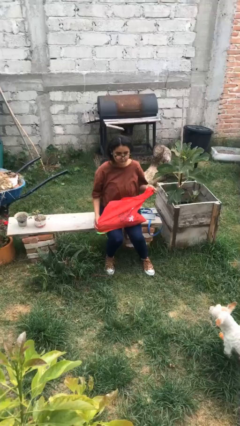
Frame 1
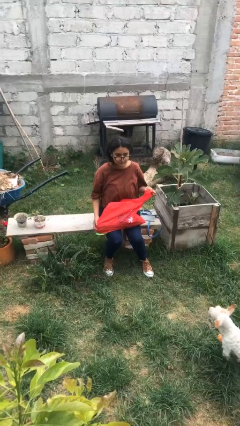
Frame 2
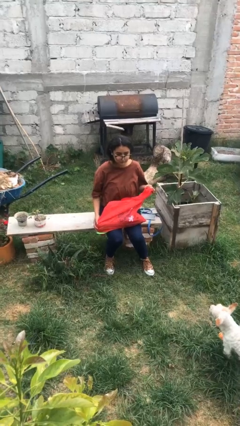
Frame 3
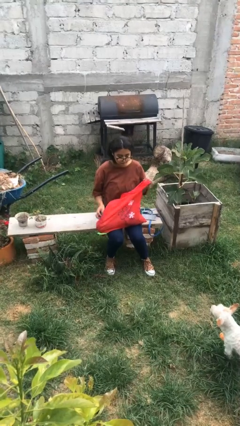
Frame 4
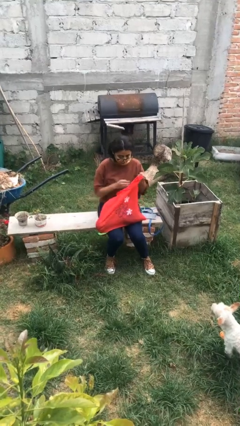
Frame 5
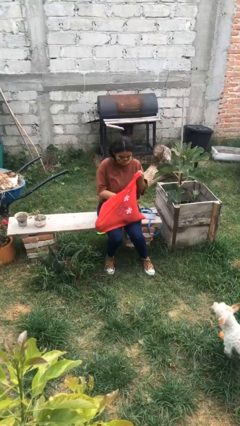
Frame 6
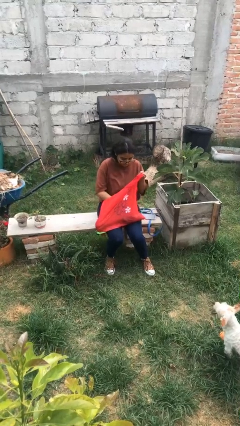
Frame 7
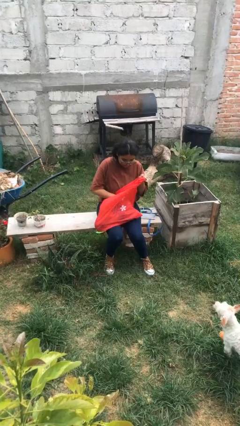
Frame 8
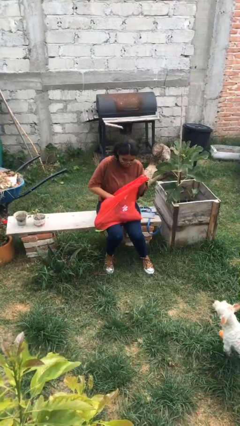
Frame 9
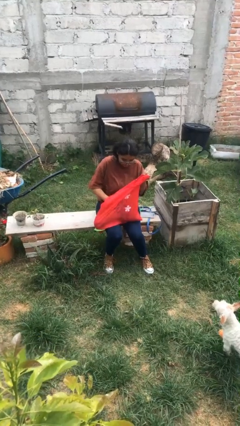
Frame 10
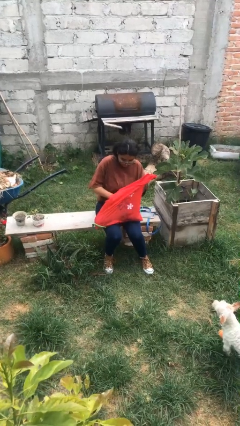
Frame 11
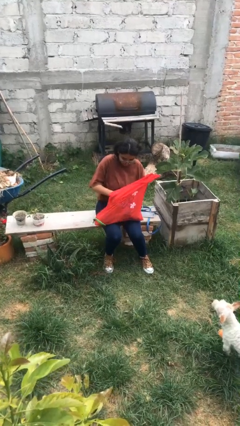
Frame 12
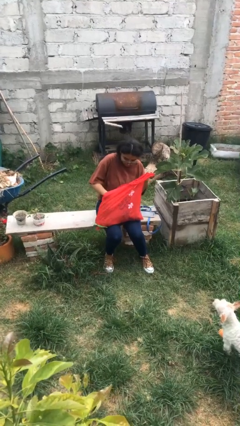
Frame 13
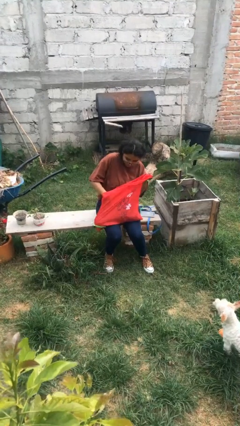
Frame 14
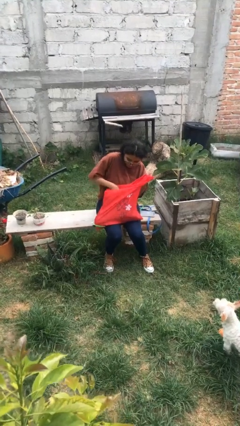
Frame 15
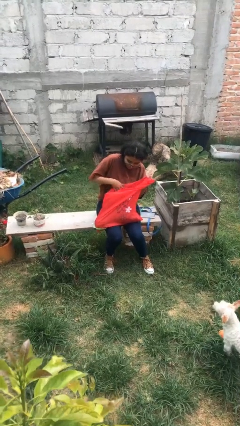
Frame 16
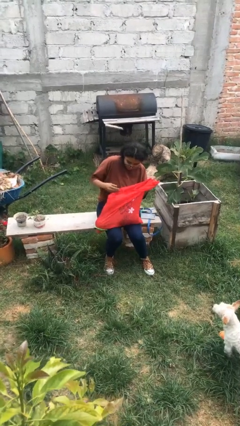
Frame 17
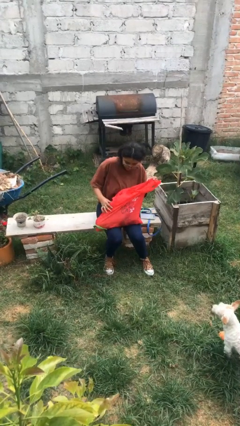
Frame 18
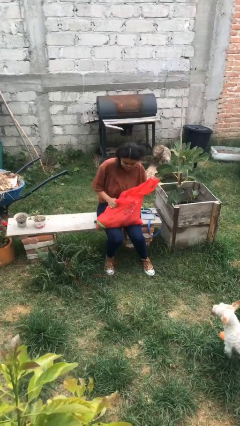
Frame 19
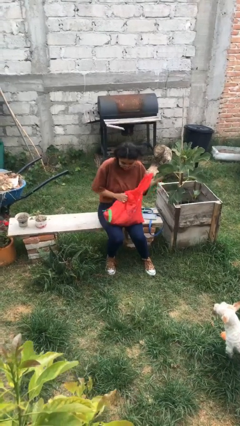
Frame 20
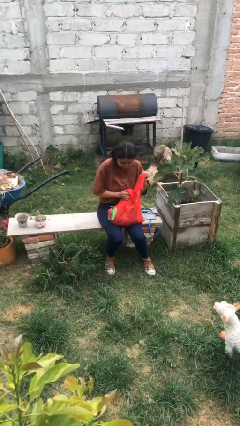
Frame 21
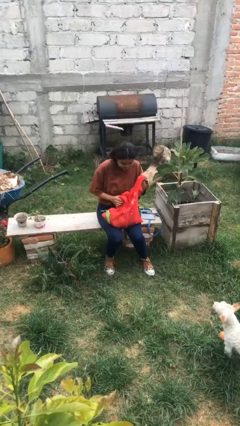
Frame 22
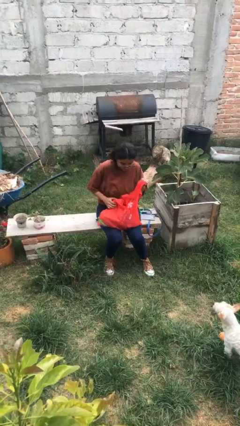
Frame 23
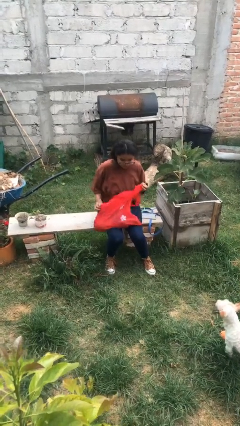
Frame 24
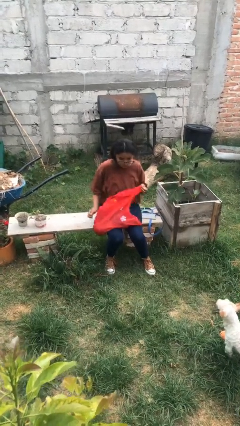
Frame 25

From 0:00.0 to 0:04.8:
person searches in bag

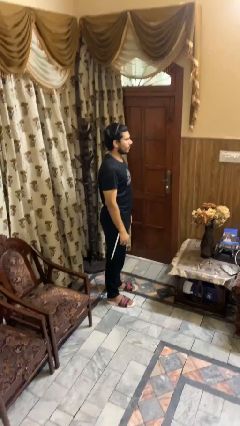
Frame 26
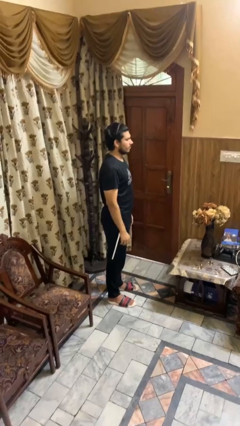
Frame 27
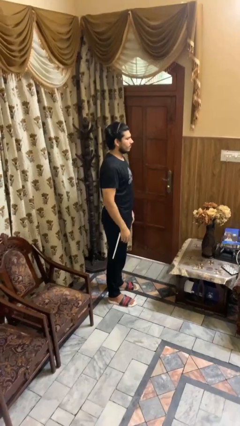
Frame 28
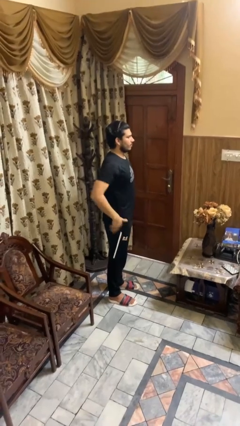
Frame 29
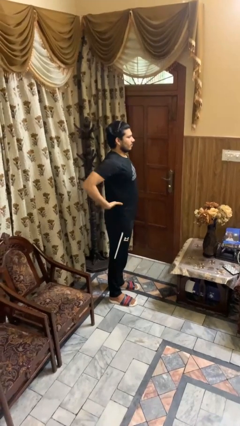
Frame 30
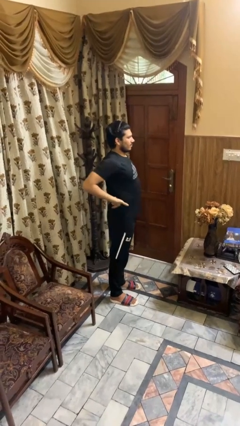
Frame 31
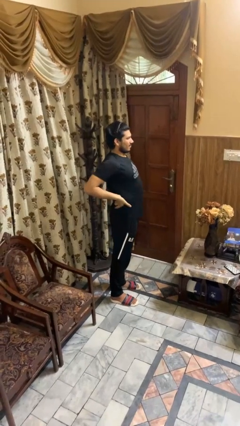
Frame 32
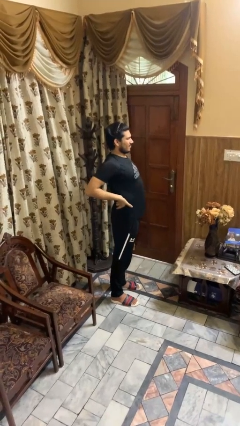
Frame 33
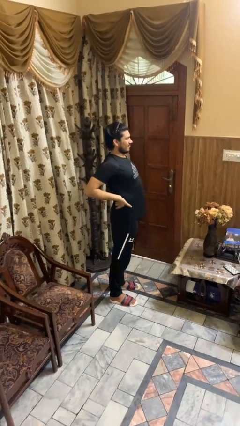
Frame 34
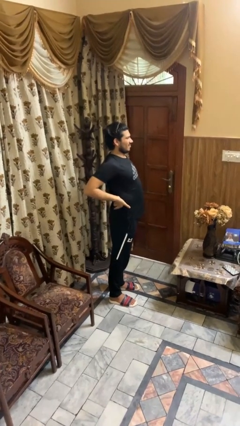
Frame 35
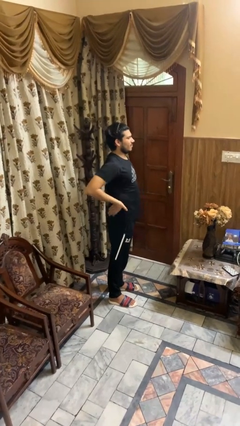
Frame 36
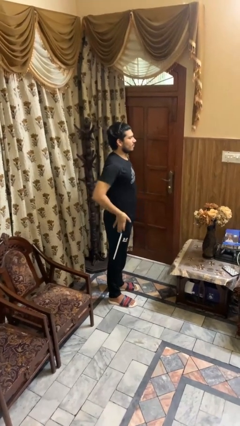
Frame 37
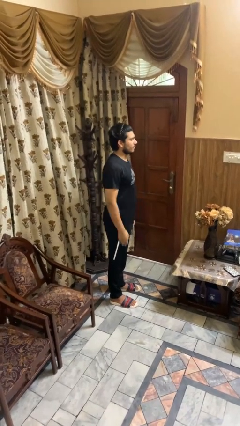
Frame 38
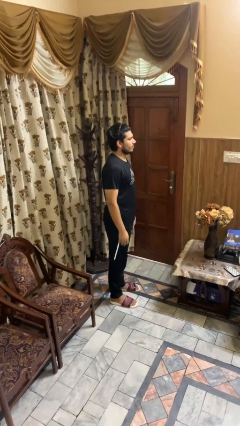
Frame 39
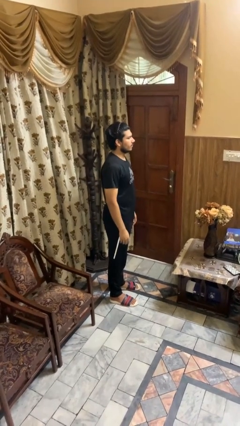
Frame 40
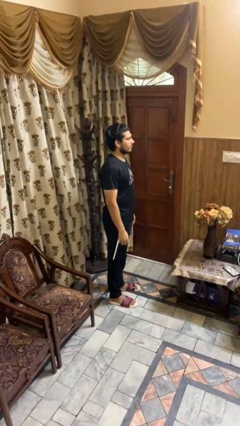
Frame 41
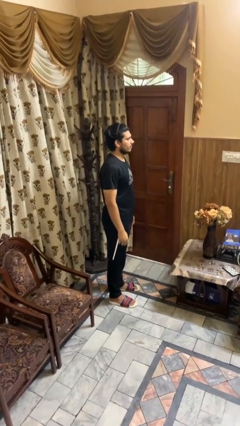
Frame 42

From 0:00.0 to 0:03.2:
person stretches back

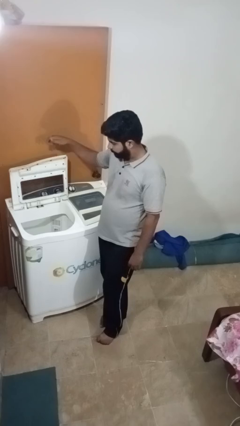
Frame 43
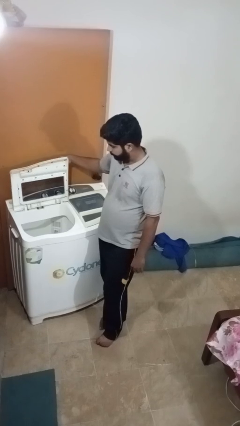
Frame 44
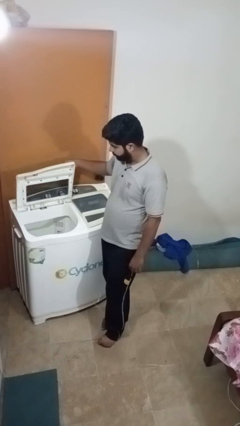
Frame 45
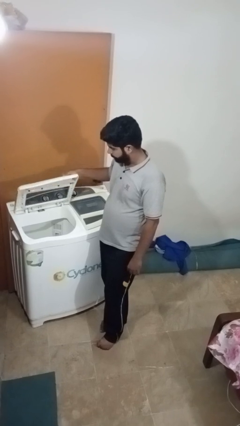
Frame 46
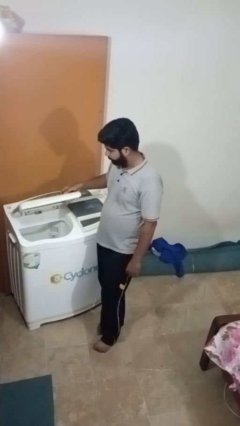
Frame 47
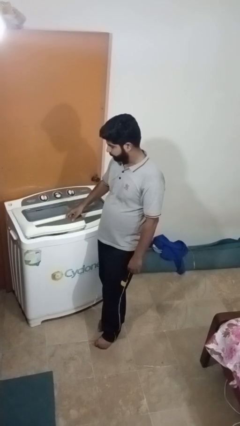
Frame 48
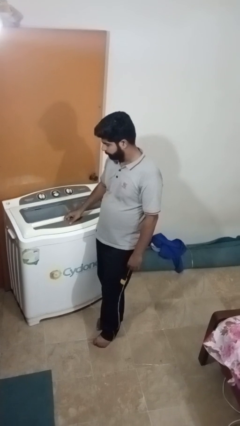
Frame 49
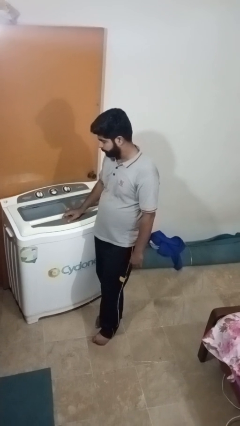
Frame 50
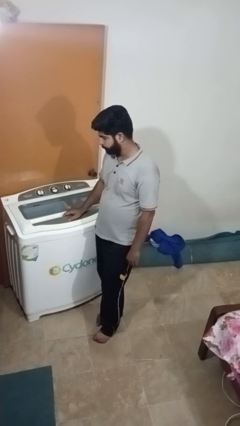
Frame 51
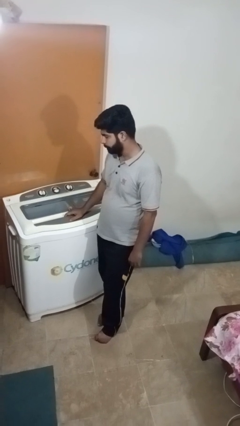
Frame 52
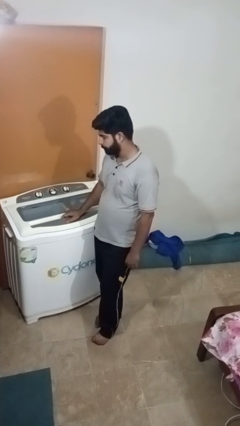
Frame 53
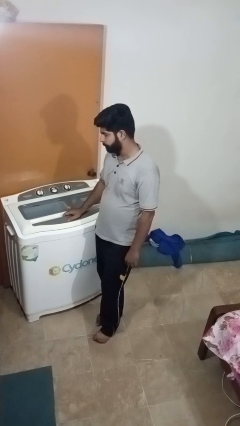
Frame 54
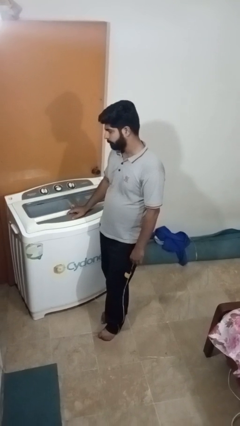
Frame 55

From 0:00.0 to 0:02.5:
person closes clothes washer

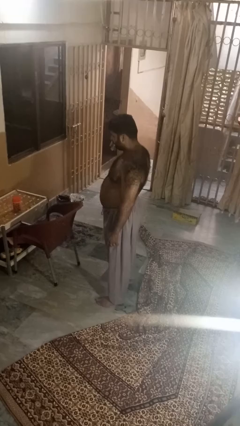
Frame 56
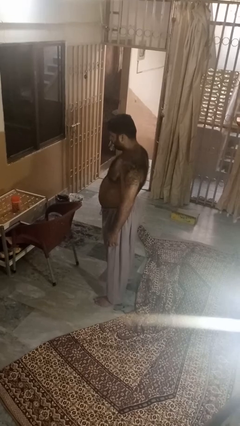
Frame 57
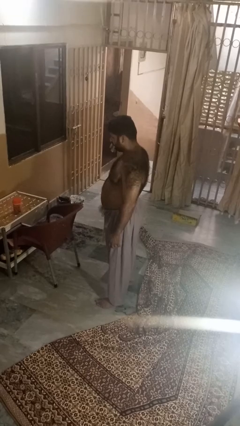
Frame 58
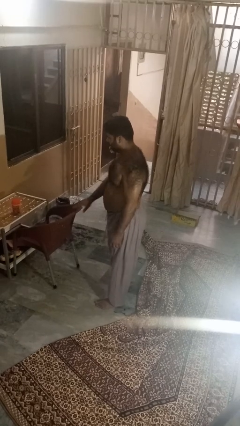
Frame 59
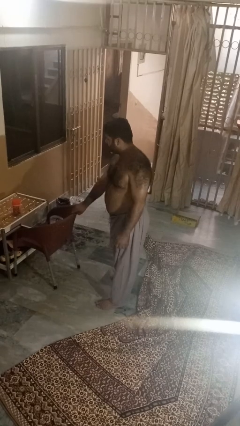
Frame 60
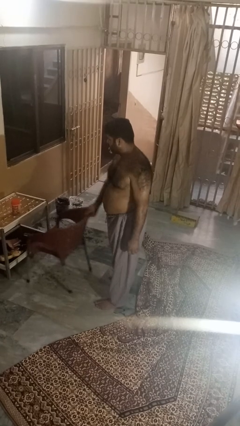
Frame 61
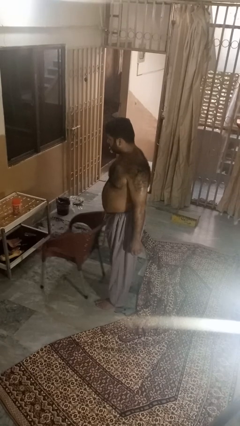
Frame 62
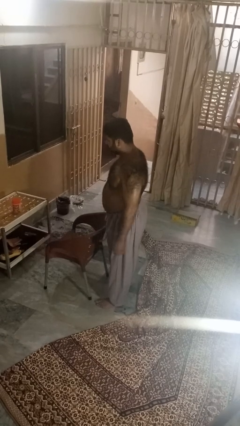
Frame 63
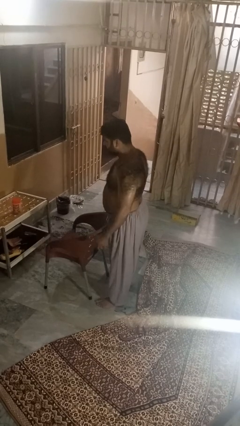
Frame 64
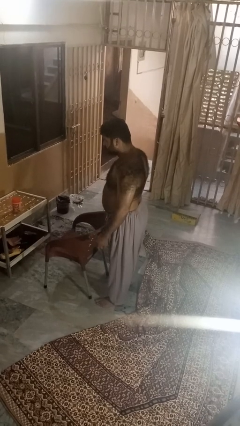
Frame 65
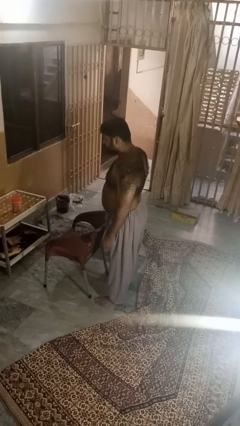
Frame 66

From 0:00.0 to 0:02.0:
person pulls out chair

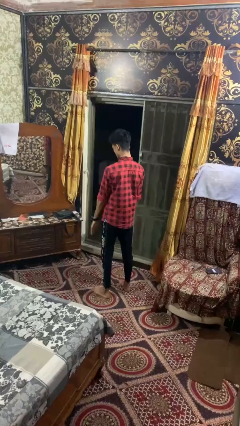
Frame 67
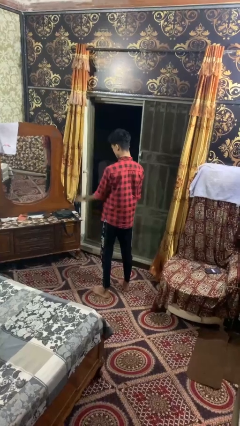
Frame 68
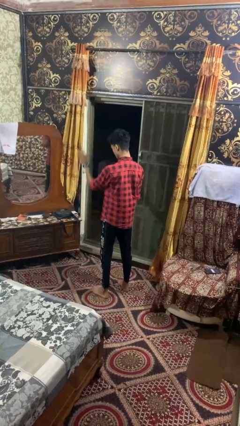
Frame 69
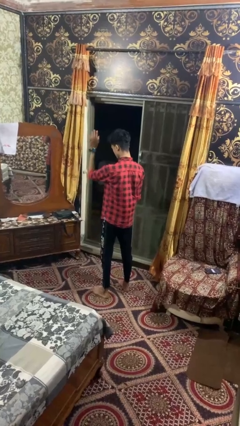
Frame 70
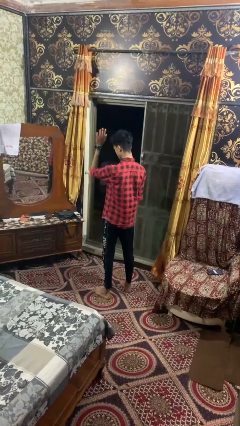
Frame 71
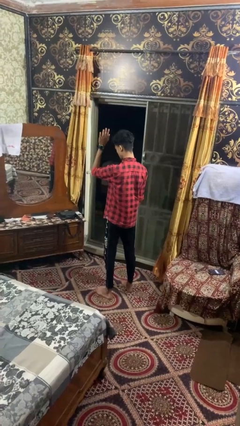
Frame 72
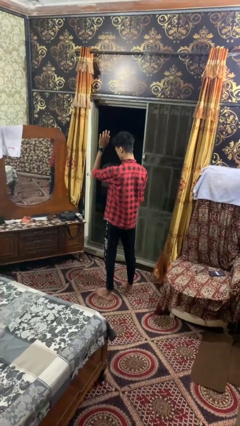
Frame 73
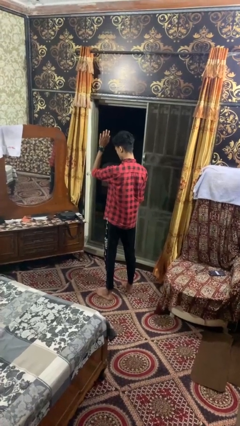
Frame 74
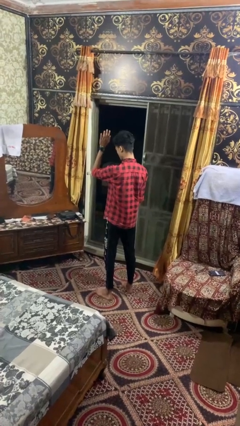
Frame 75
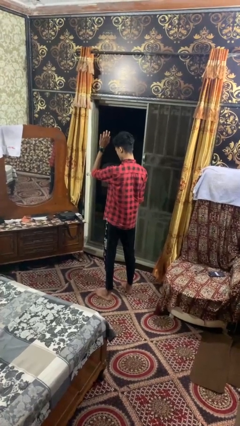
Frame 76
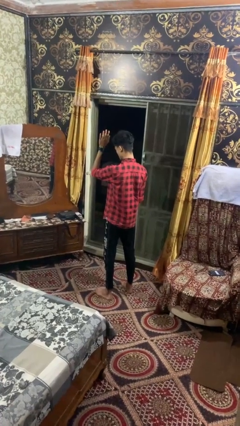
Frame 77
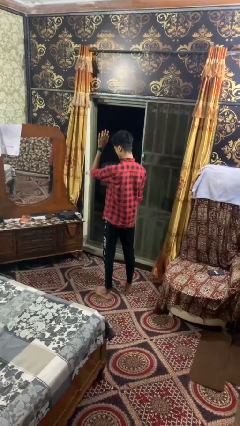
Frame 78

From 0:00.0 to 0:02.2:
person gestures raise hand

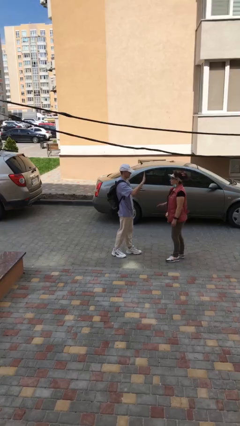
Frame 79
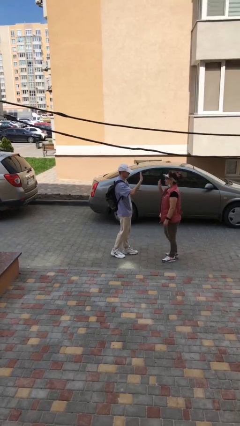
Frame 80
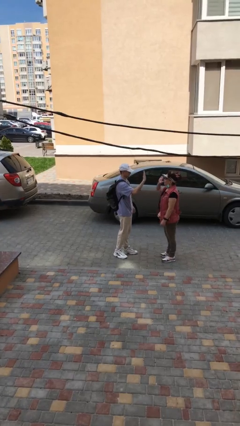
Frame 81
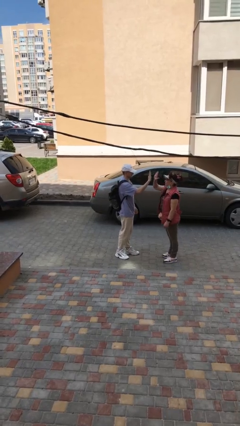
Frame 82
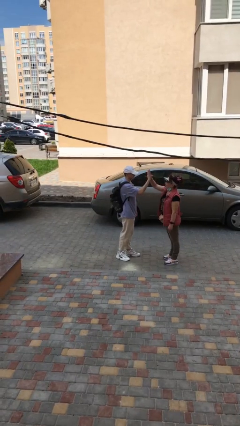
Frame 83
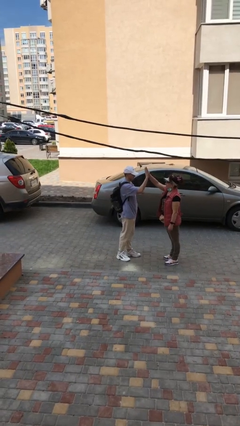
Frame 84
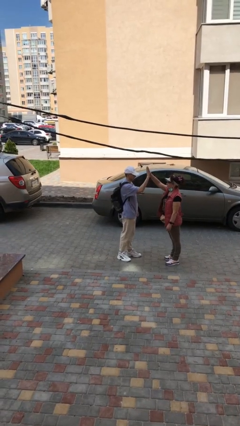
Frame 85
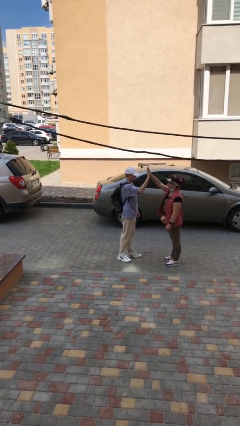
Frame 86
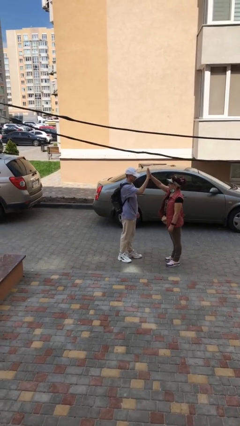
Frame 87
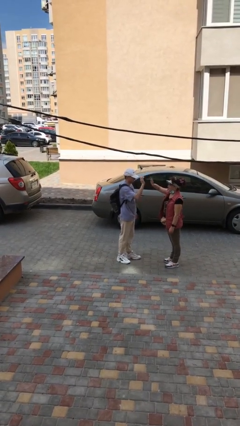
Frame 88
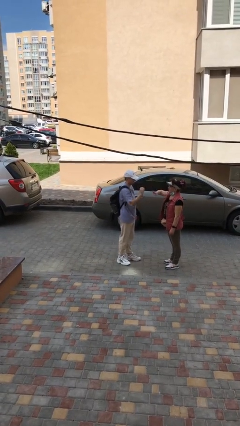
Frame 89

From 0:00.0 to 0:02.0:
person highfives hand

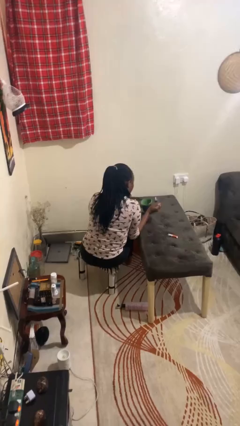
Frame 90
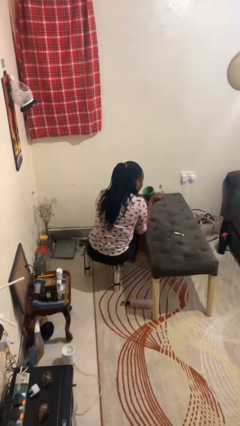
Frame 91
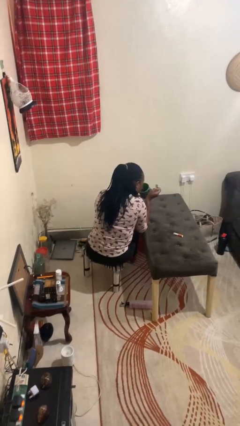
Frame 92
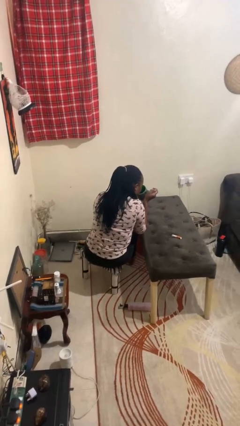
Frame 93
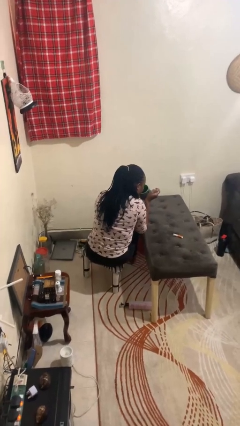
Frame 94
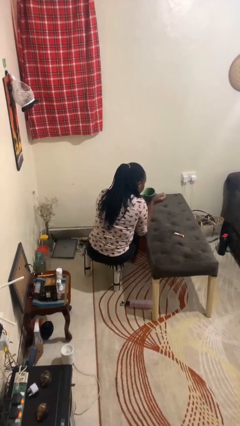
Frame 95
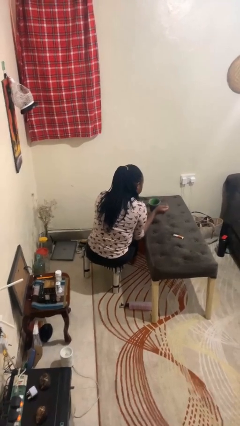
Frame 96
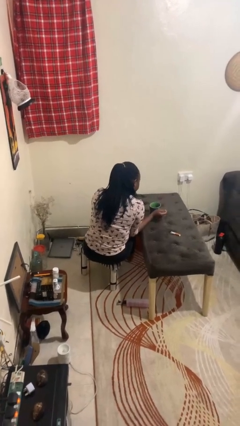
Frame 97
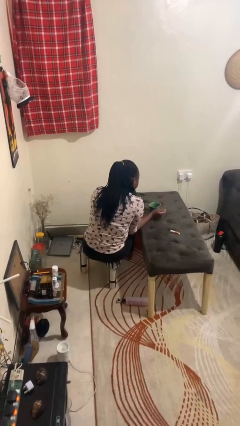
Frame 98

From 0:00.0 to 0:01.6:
person drinks from mug
